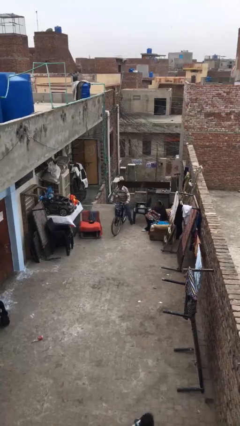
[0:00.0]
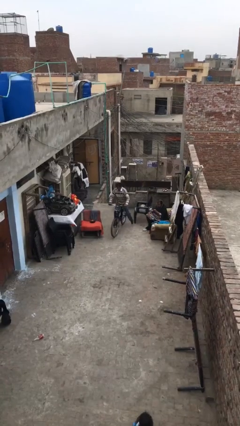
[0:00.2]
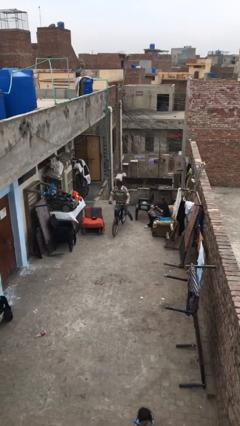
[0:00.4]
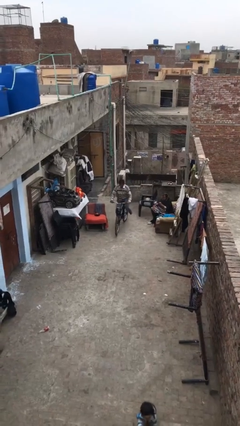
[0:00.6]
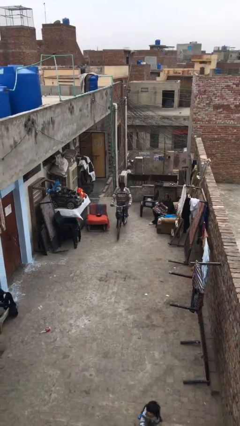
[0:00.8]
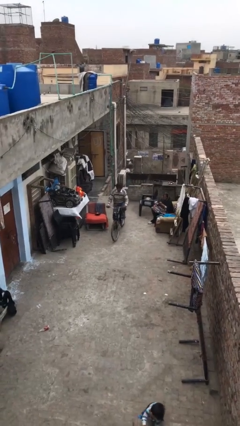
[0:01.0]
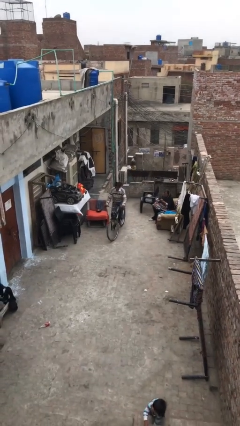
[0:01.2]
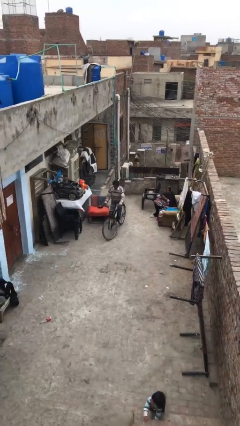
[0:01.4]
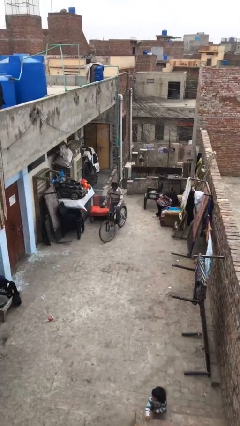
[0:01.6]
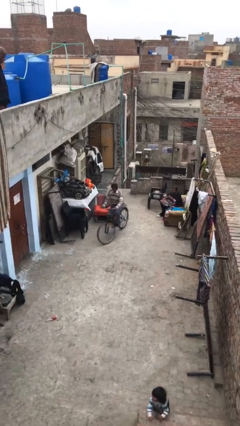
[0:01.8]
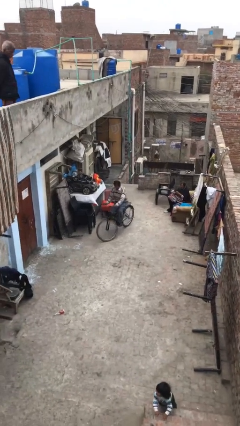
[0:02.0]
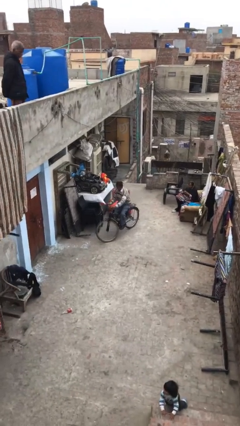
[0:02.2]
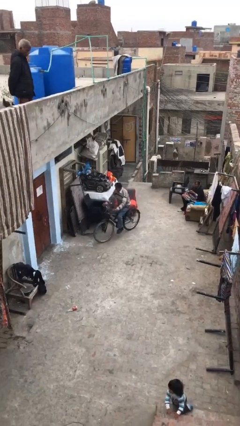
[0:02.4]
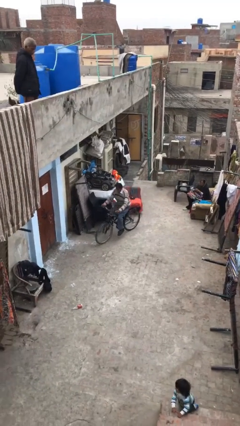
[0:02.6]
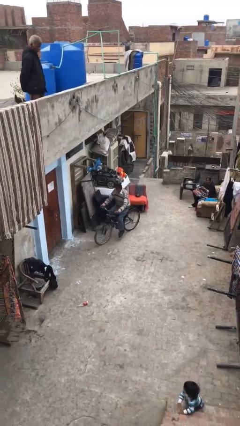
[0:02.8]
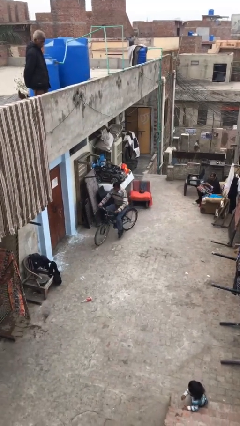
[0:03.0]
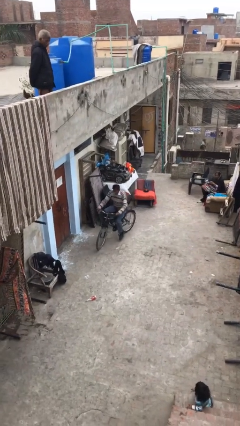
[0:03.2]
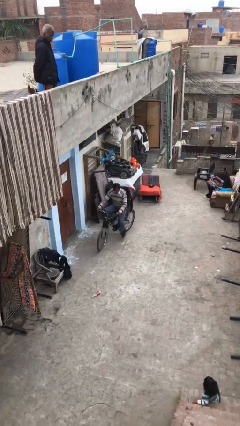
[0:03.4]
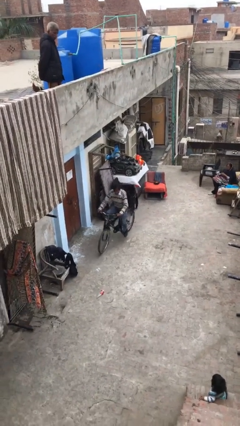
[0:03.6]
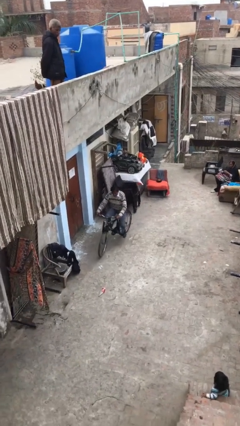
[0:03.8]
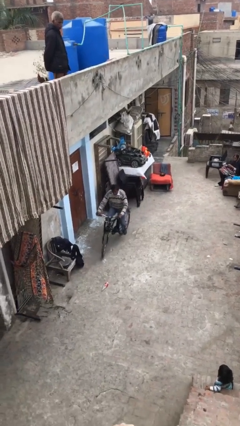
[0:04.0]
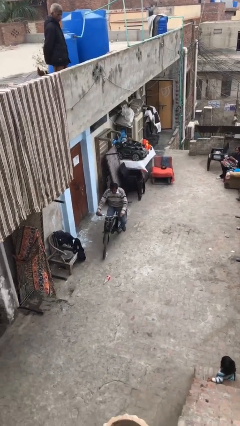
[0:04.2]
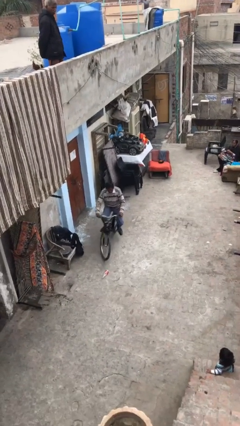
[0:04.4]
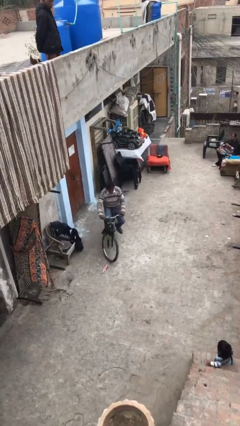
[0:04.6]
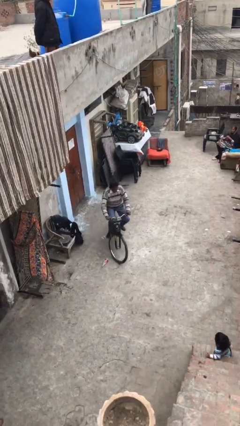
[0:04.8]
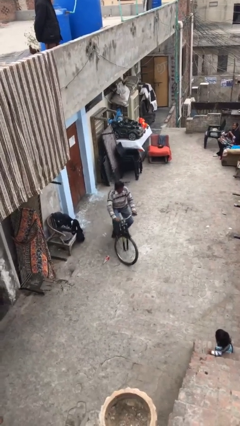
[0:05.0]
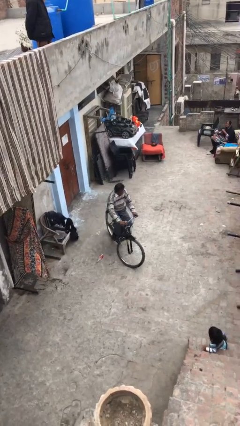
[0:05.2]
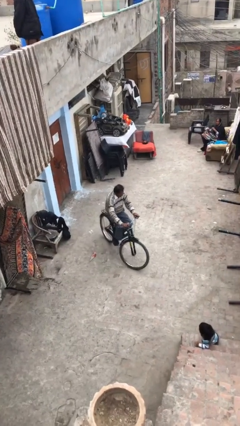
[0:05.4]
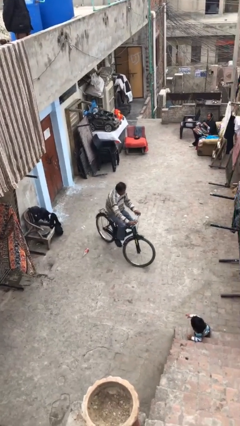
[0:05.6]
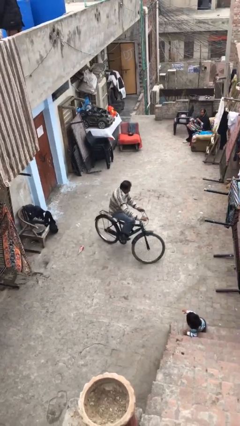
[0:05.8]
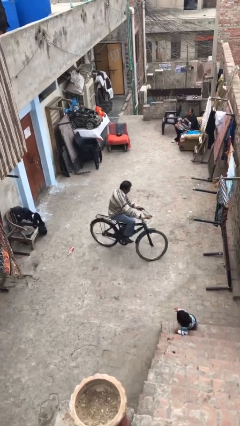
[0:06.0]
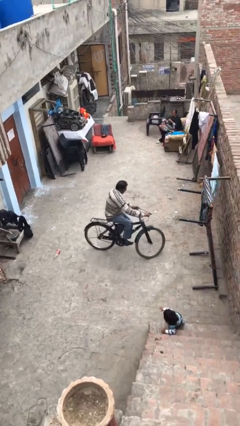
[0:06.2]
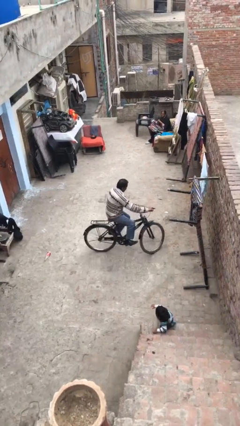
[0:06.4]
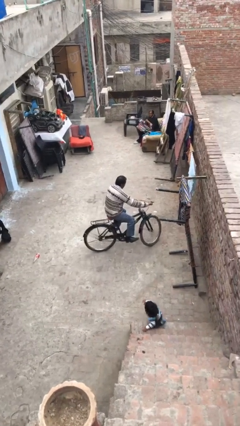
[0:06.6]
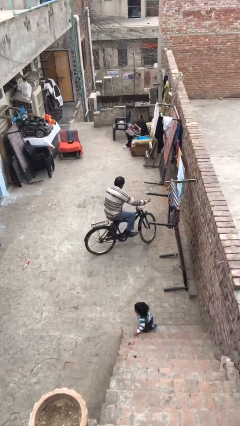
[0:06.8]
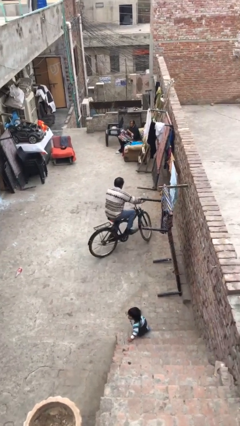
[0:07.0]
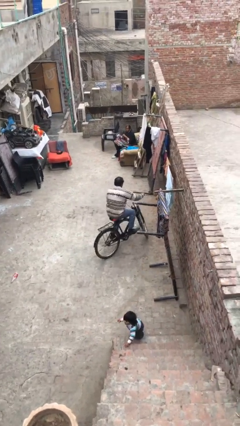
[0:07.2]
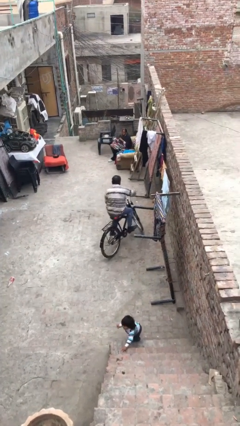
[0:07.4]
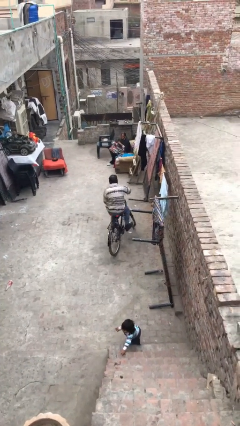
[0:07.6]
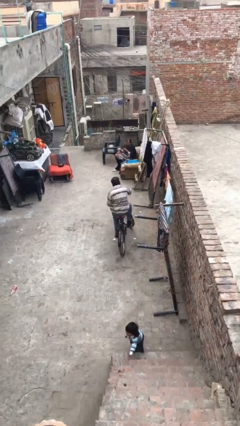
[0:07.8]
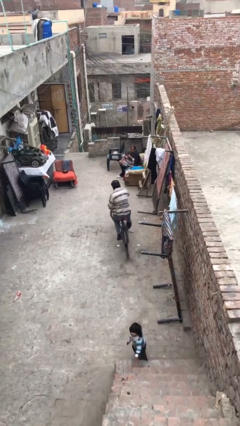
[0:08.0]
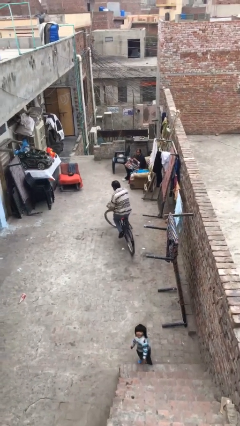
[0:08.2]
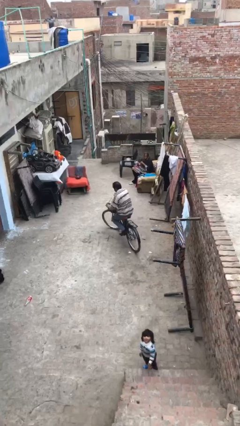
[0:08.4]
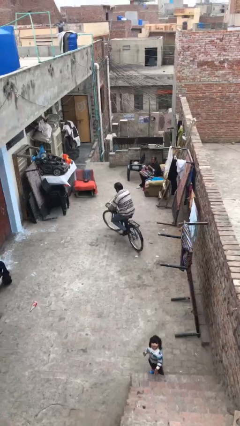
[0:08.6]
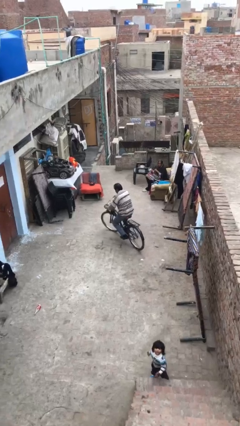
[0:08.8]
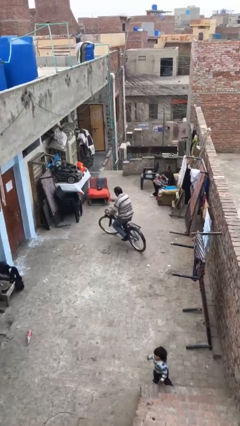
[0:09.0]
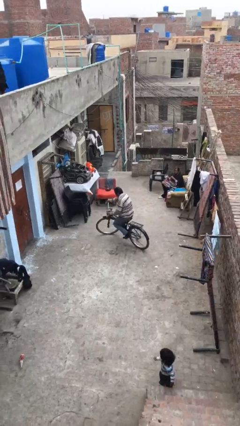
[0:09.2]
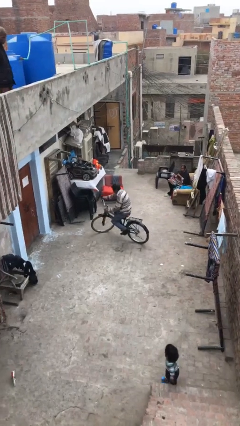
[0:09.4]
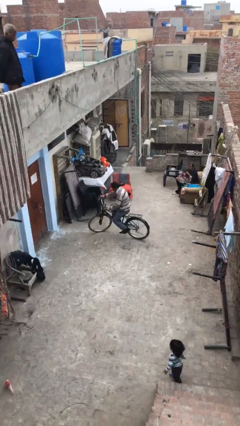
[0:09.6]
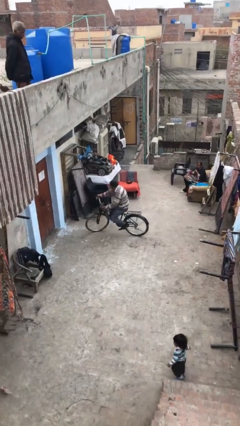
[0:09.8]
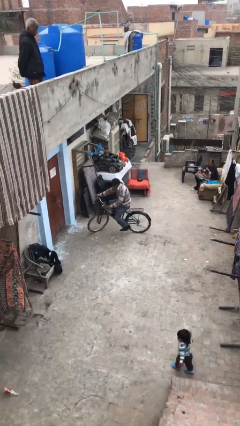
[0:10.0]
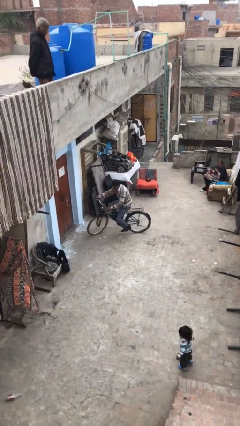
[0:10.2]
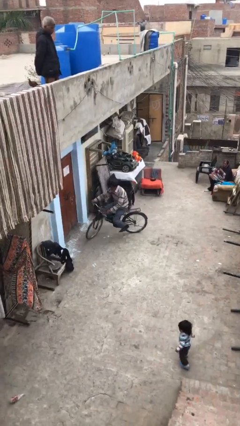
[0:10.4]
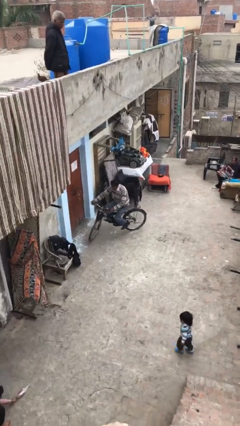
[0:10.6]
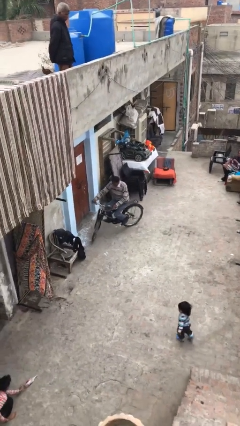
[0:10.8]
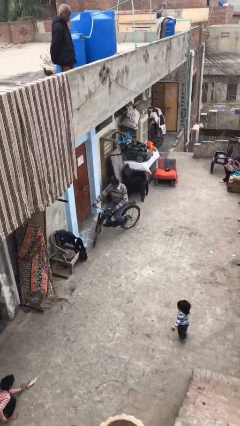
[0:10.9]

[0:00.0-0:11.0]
person rides bicycle

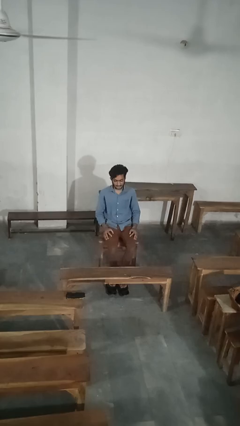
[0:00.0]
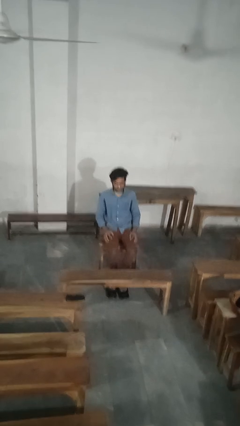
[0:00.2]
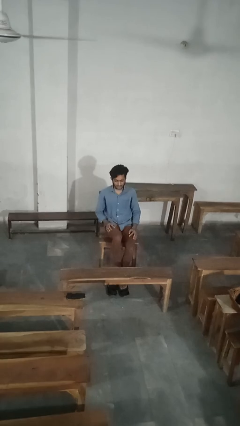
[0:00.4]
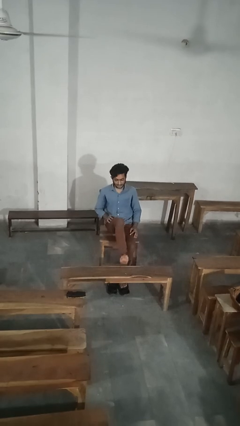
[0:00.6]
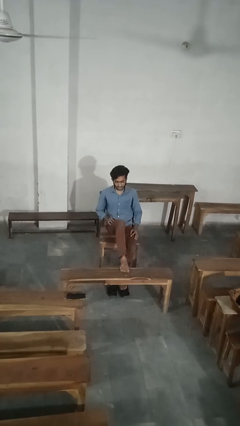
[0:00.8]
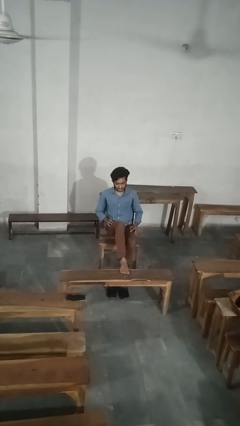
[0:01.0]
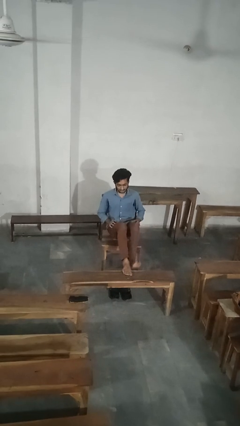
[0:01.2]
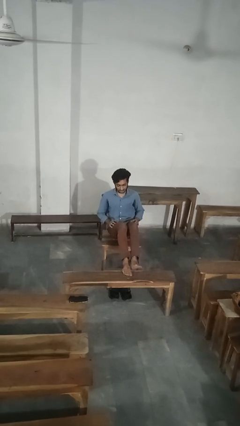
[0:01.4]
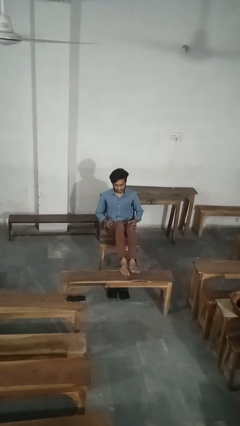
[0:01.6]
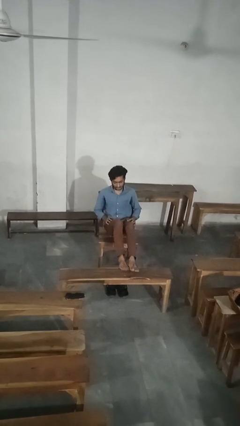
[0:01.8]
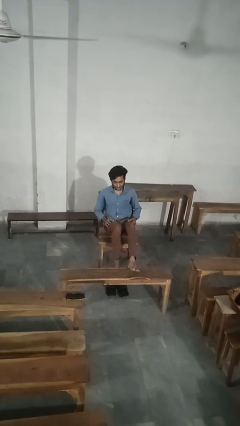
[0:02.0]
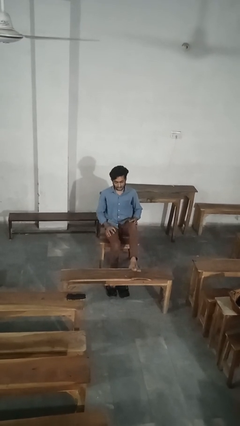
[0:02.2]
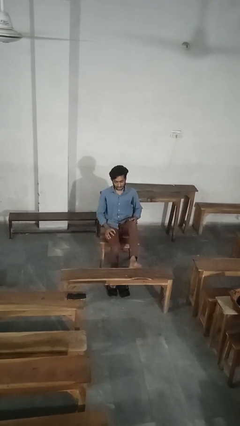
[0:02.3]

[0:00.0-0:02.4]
person puts feet up

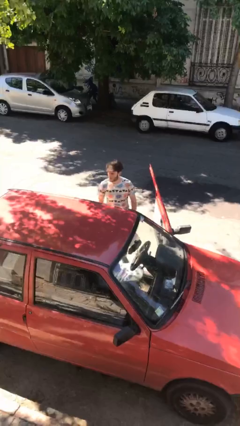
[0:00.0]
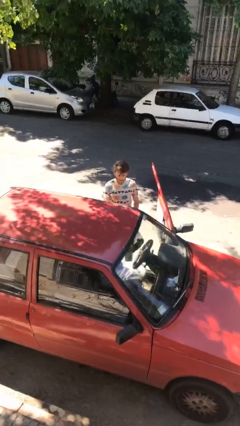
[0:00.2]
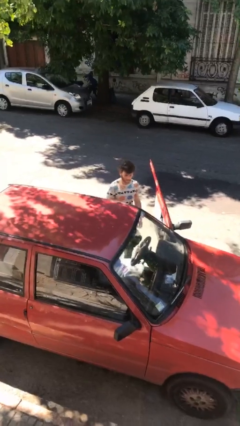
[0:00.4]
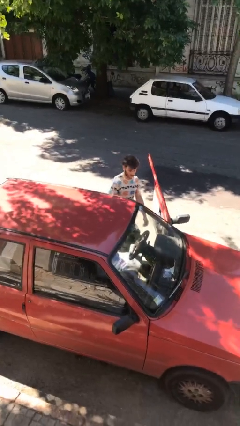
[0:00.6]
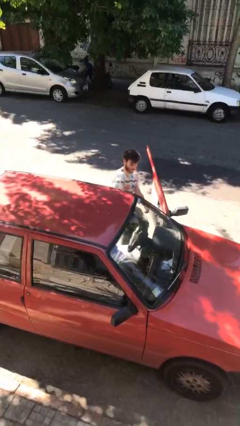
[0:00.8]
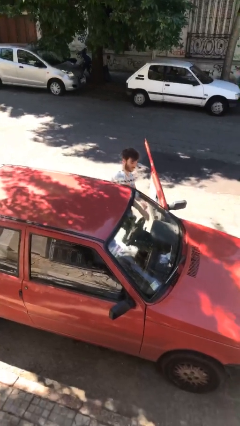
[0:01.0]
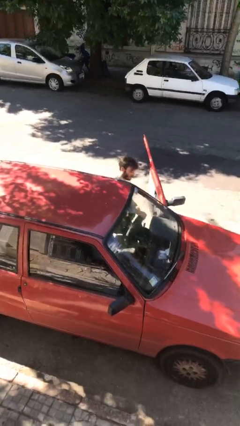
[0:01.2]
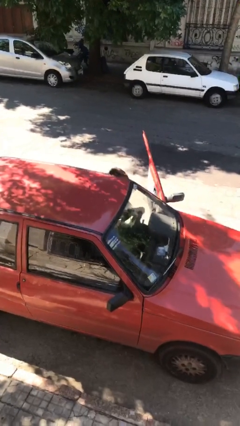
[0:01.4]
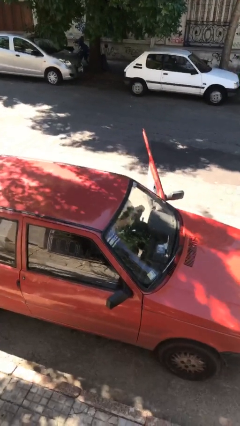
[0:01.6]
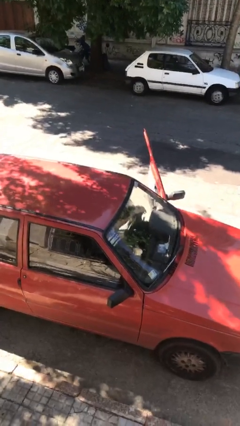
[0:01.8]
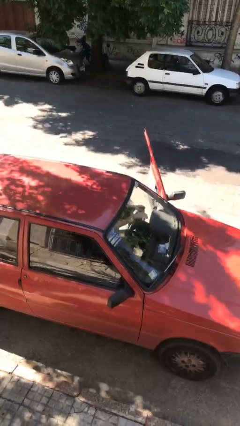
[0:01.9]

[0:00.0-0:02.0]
person enters car

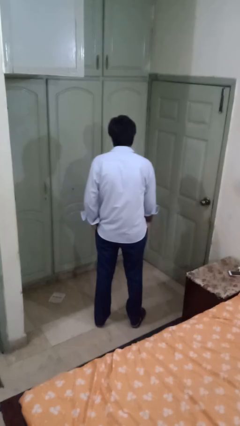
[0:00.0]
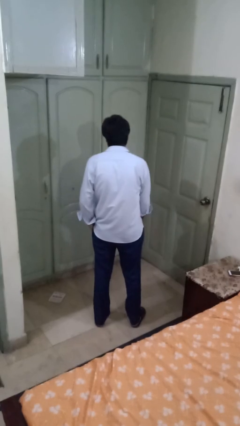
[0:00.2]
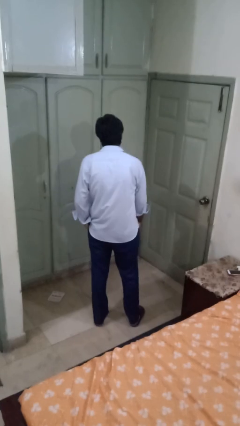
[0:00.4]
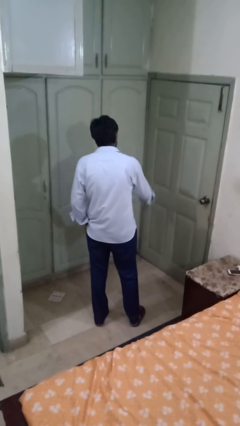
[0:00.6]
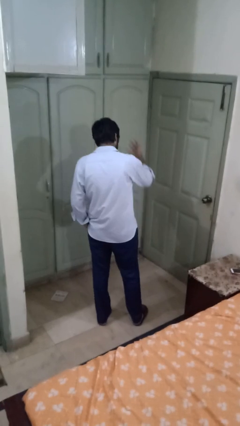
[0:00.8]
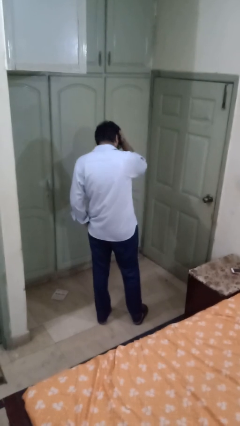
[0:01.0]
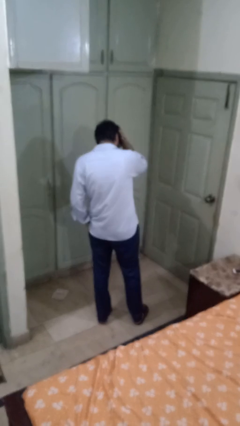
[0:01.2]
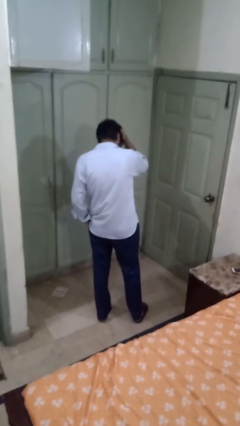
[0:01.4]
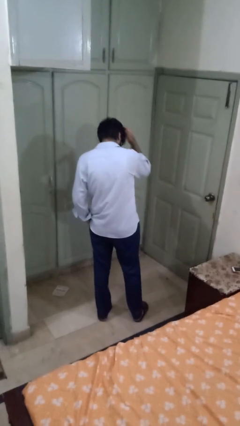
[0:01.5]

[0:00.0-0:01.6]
person pats head

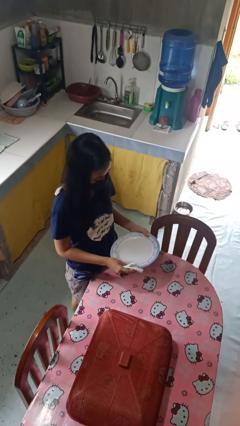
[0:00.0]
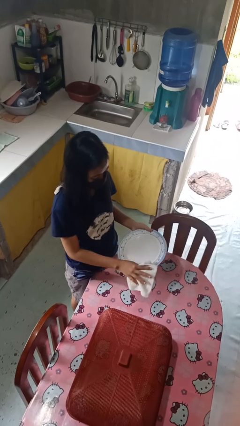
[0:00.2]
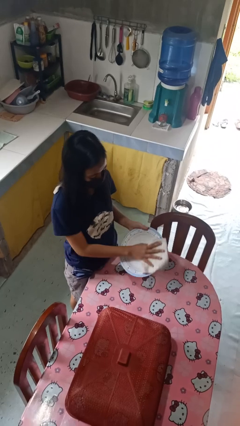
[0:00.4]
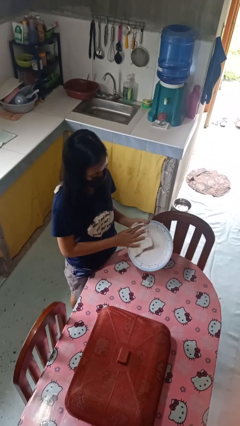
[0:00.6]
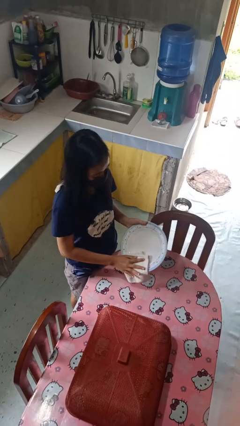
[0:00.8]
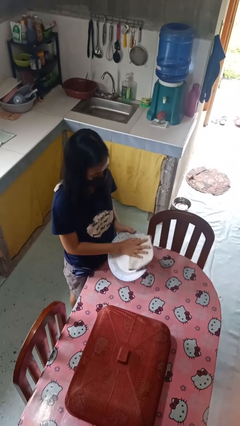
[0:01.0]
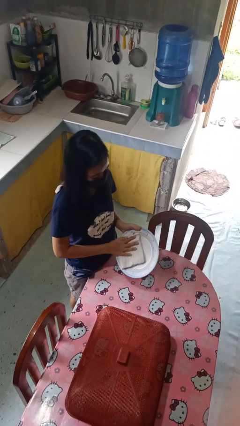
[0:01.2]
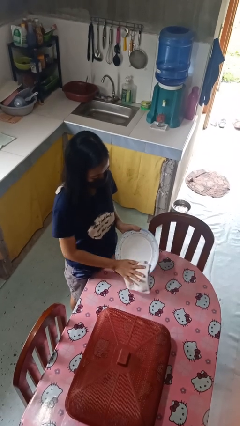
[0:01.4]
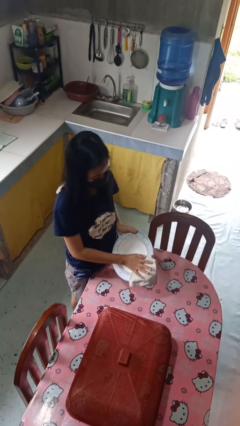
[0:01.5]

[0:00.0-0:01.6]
person dries dish
